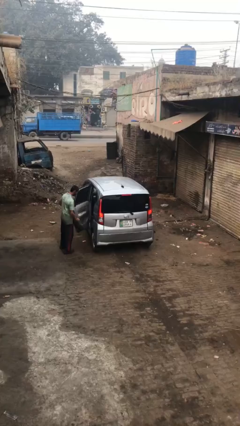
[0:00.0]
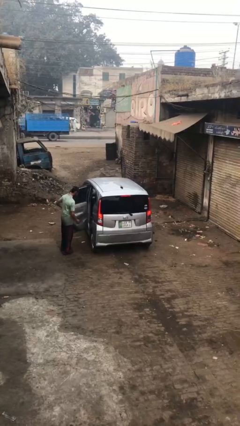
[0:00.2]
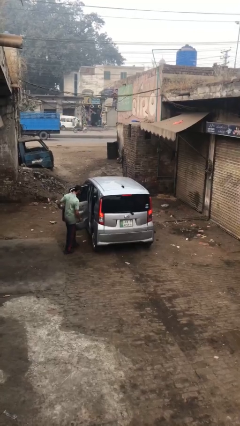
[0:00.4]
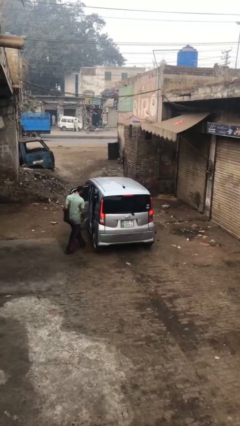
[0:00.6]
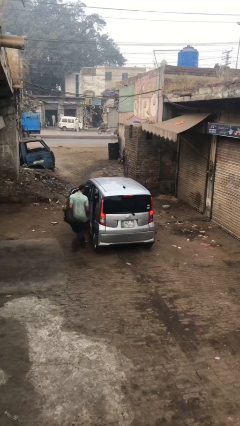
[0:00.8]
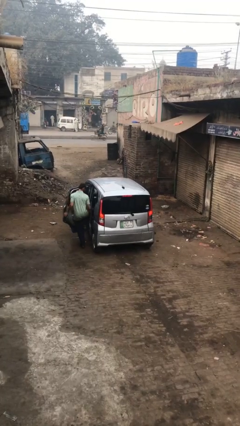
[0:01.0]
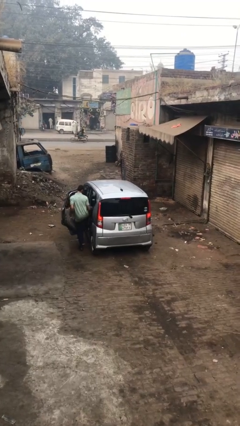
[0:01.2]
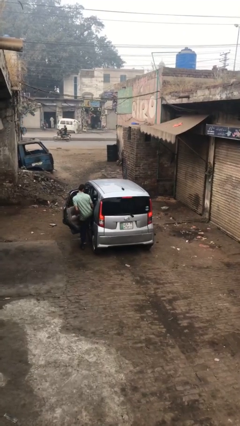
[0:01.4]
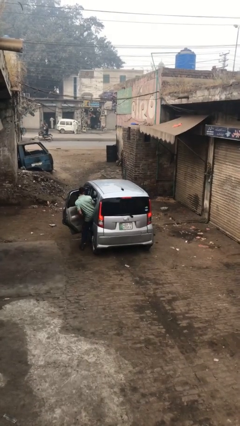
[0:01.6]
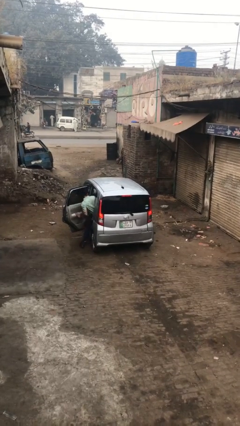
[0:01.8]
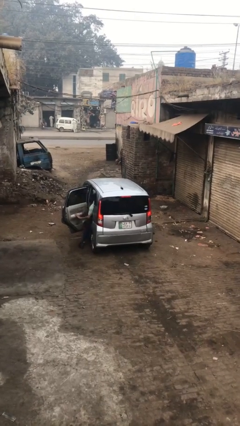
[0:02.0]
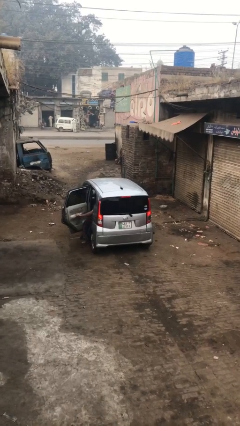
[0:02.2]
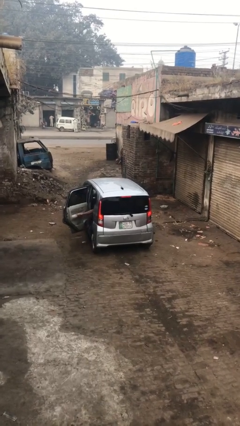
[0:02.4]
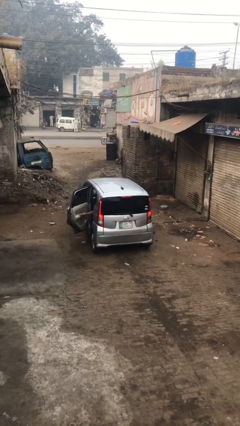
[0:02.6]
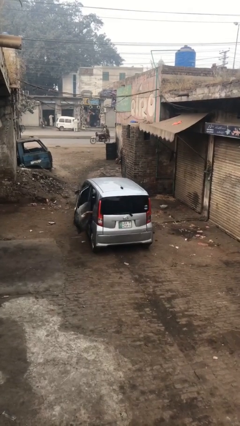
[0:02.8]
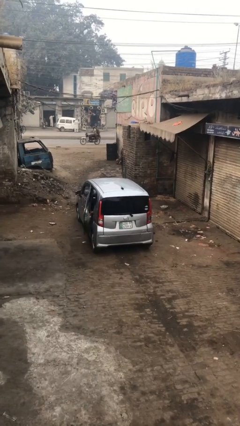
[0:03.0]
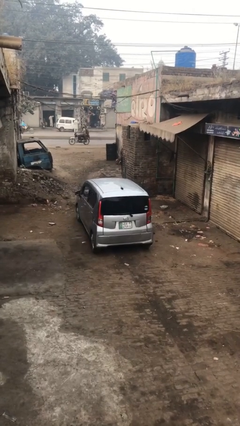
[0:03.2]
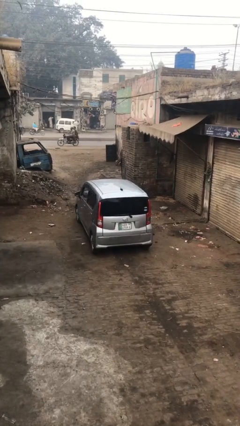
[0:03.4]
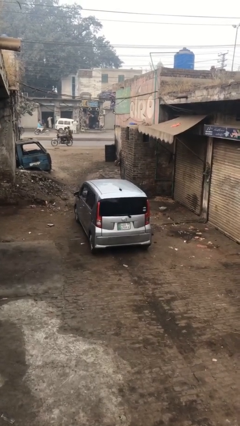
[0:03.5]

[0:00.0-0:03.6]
car picks up person

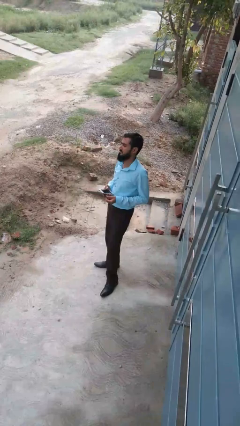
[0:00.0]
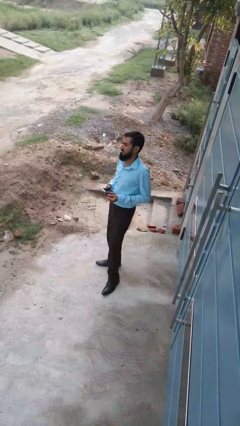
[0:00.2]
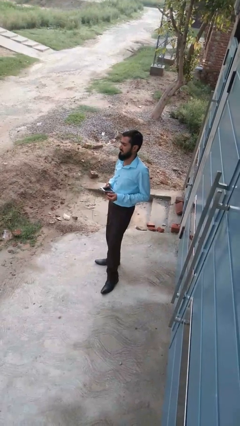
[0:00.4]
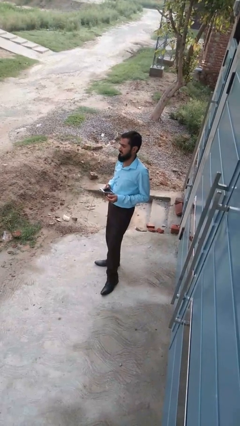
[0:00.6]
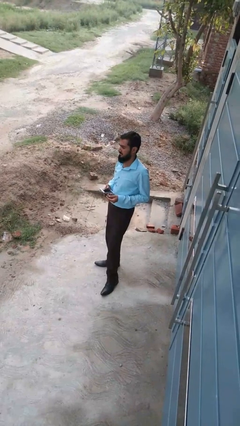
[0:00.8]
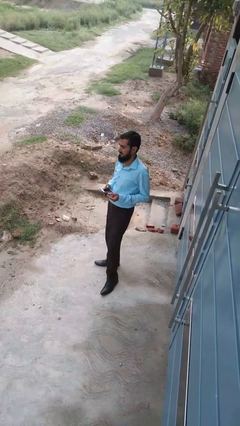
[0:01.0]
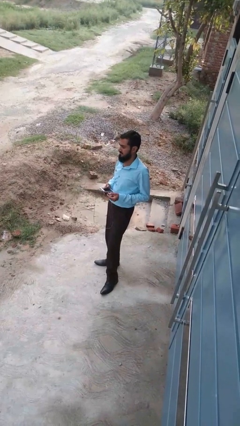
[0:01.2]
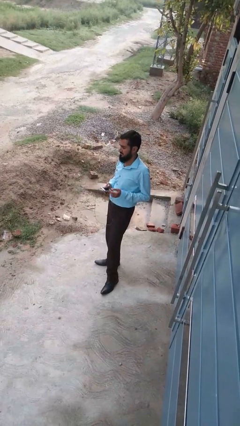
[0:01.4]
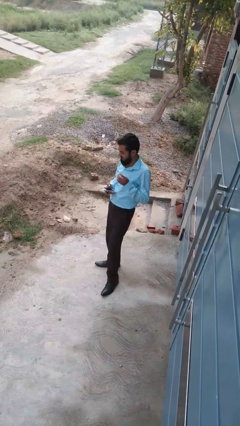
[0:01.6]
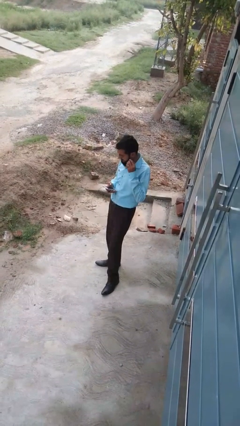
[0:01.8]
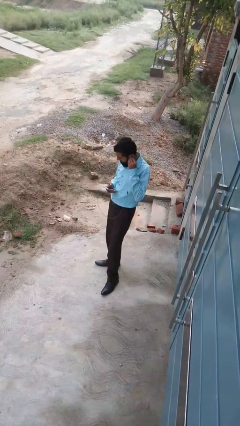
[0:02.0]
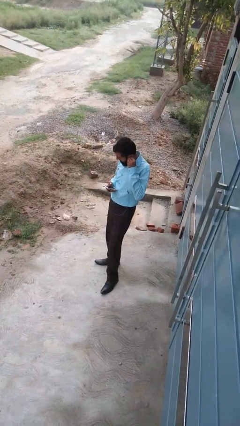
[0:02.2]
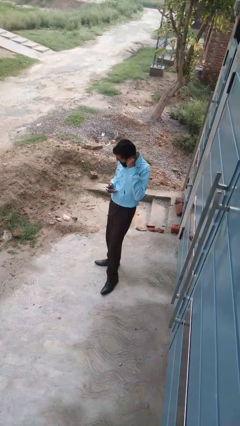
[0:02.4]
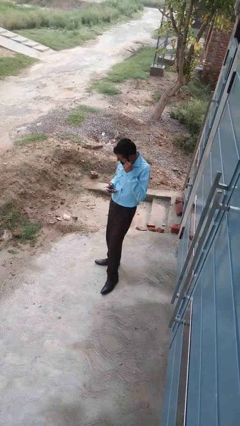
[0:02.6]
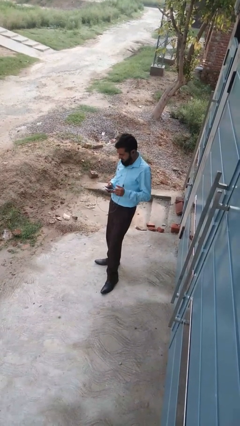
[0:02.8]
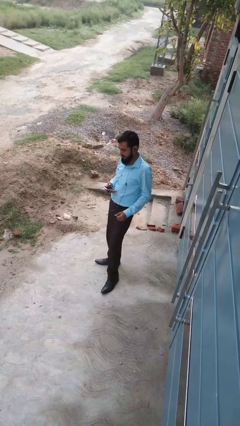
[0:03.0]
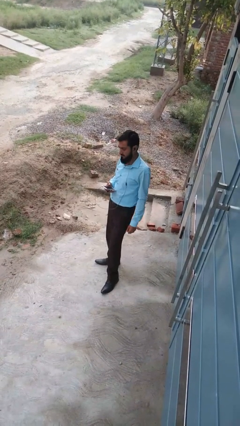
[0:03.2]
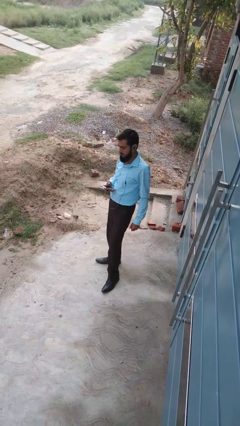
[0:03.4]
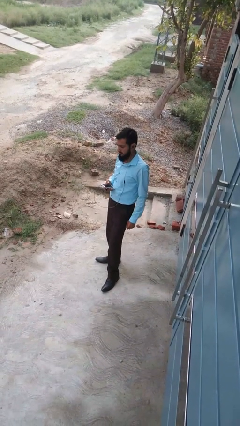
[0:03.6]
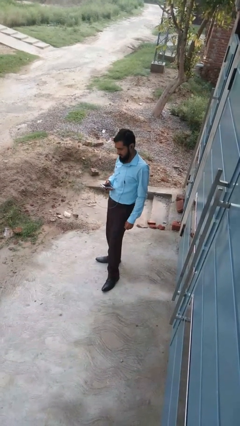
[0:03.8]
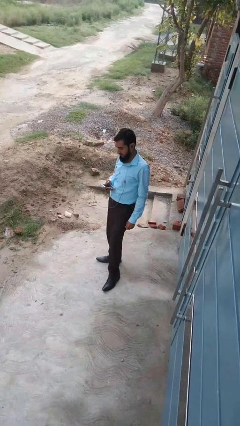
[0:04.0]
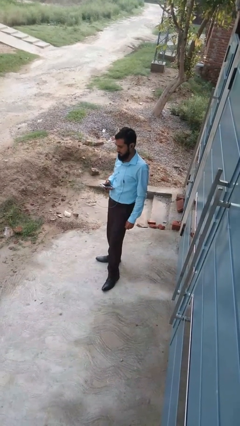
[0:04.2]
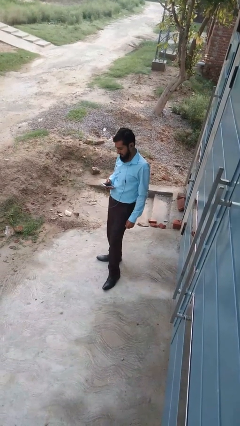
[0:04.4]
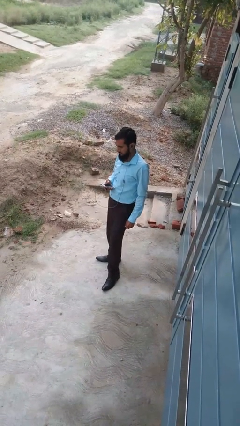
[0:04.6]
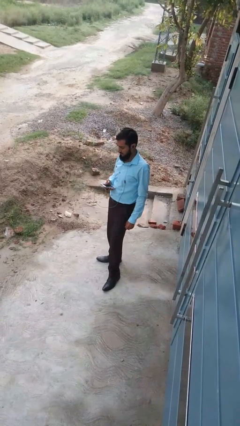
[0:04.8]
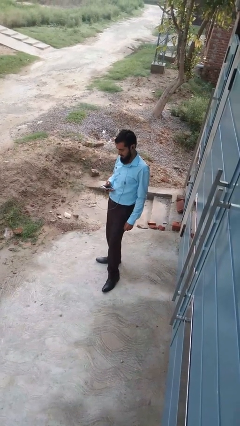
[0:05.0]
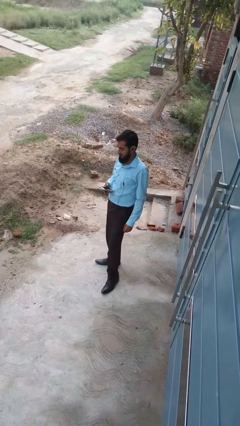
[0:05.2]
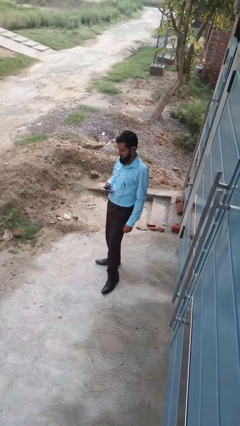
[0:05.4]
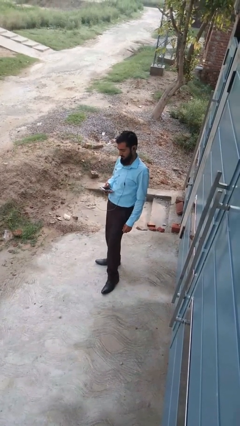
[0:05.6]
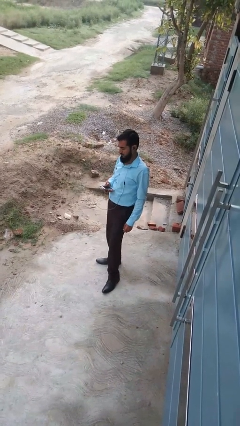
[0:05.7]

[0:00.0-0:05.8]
person puts on headphones

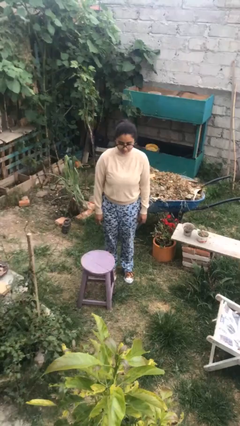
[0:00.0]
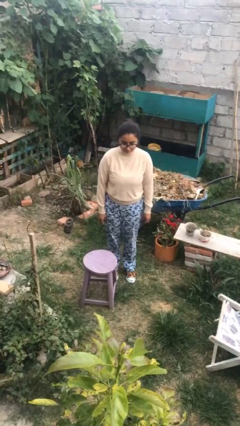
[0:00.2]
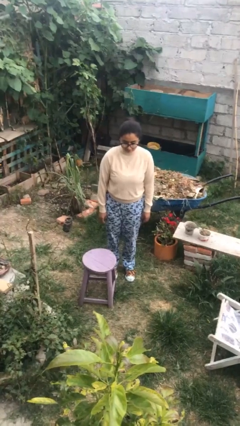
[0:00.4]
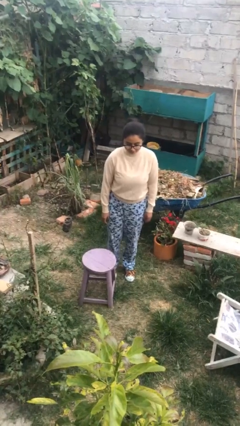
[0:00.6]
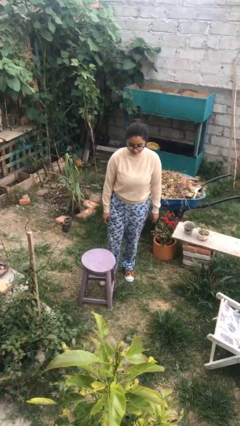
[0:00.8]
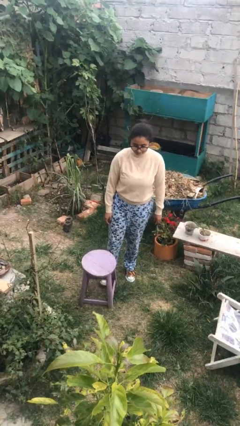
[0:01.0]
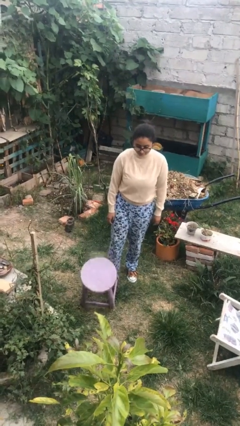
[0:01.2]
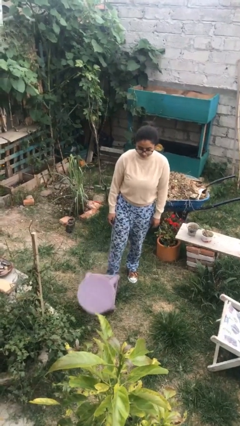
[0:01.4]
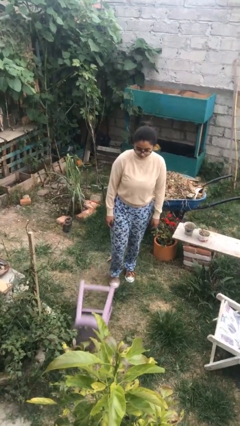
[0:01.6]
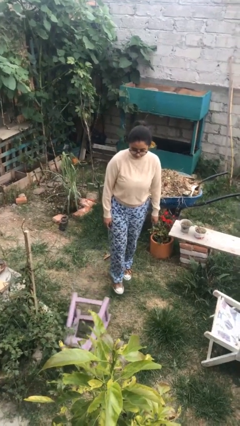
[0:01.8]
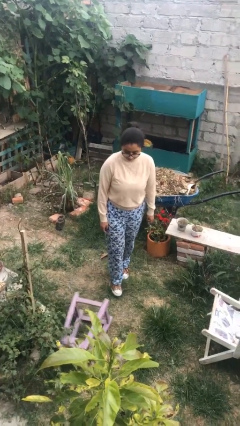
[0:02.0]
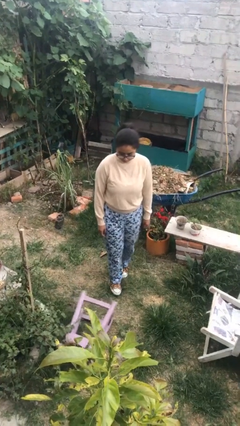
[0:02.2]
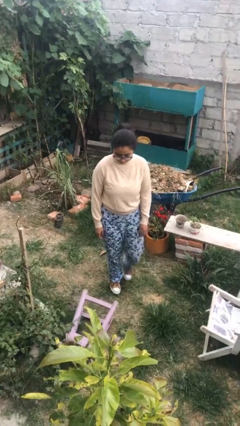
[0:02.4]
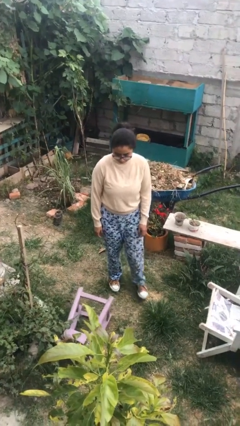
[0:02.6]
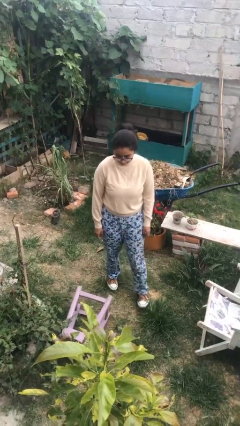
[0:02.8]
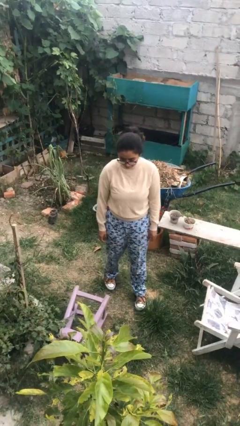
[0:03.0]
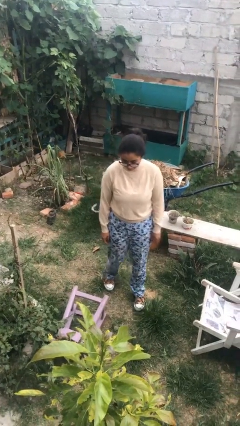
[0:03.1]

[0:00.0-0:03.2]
person knocks over furniture

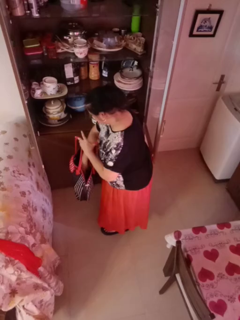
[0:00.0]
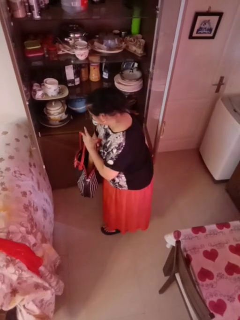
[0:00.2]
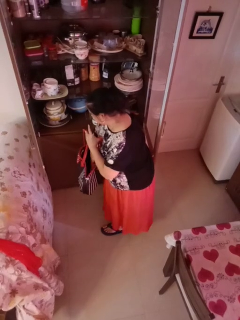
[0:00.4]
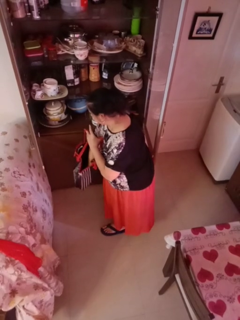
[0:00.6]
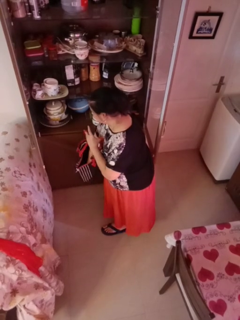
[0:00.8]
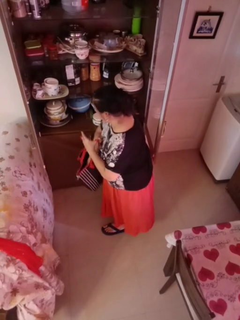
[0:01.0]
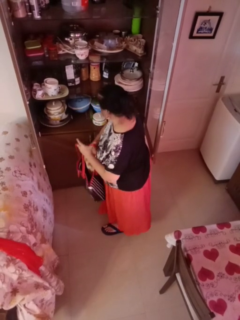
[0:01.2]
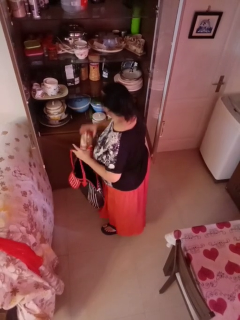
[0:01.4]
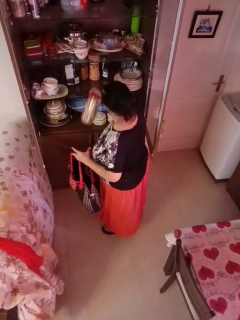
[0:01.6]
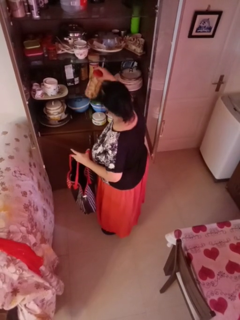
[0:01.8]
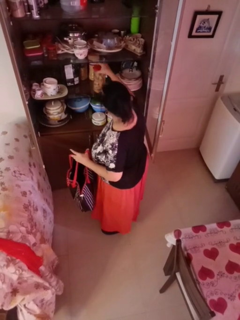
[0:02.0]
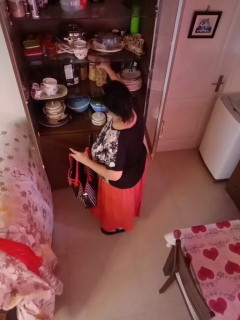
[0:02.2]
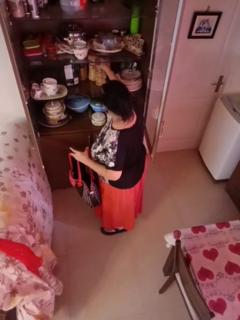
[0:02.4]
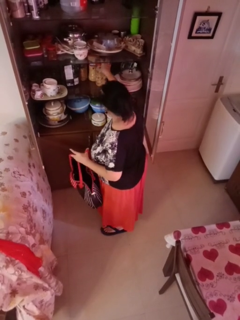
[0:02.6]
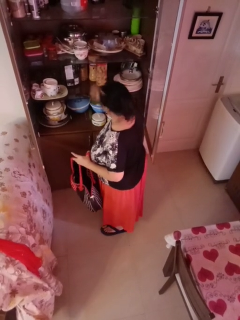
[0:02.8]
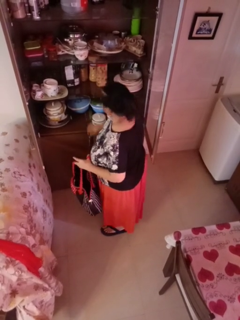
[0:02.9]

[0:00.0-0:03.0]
person loads groceries into cabinet

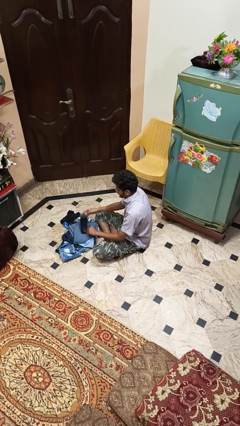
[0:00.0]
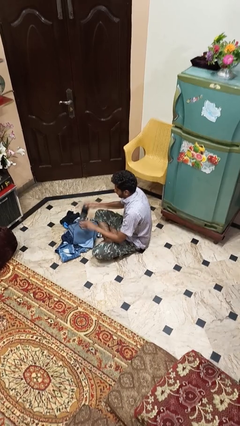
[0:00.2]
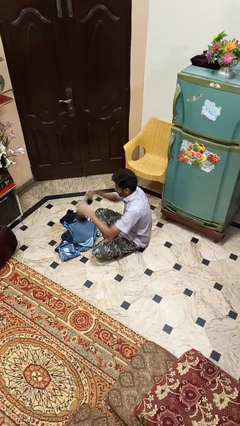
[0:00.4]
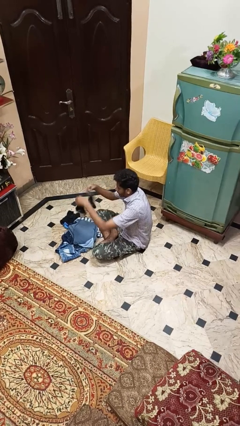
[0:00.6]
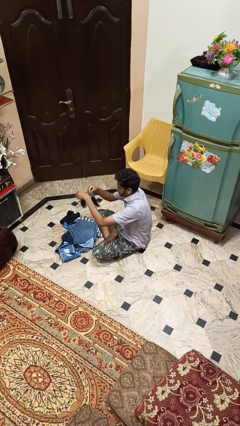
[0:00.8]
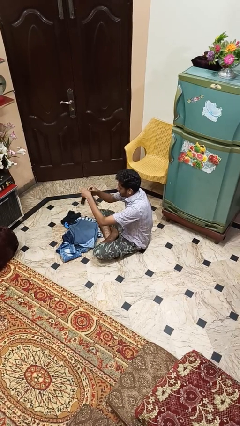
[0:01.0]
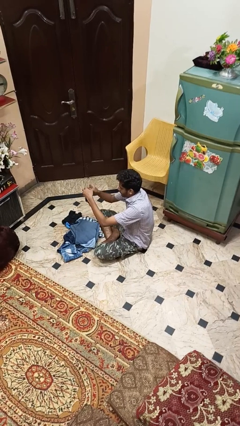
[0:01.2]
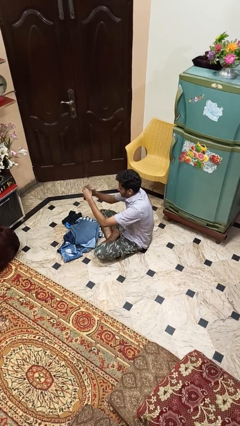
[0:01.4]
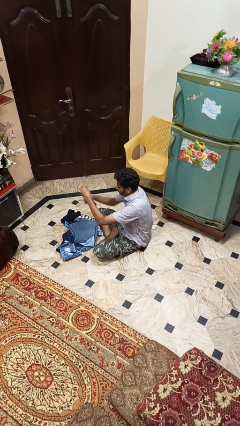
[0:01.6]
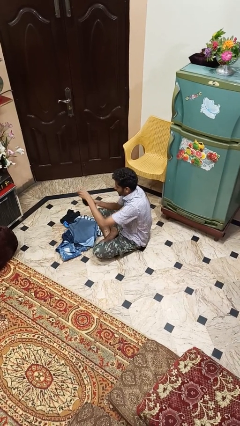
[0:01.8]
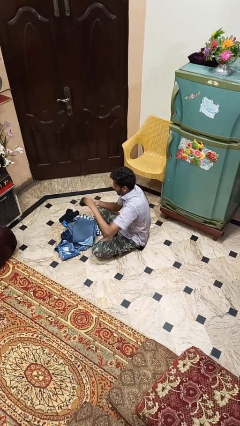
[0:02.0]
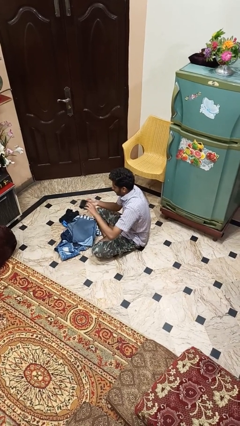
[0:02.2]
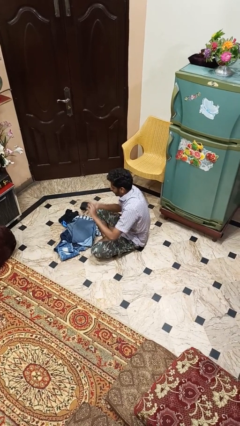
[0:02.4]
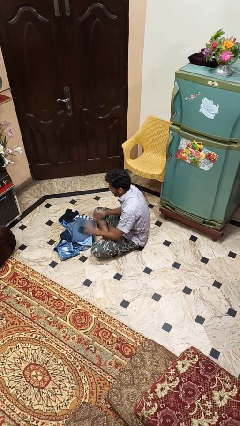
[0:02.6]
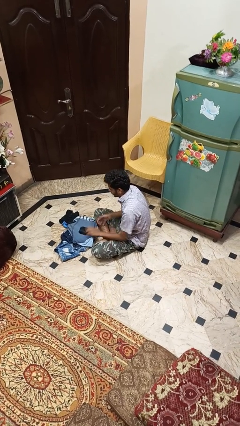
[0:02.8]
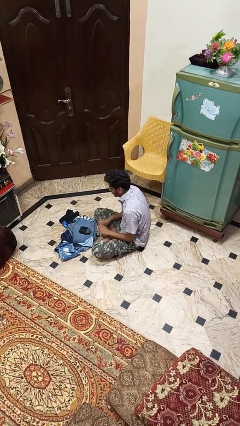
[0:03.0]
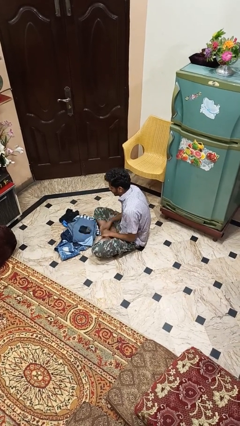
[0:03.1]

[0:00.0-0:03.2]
person folds socks
